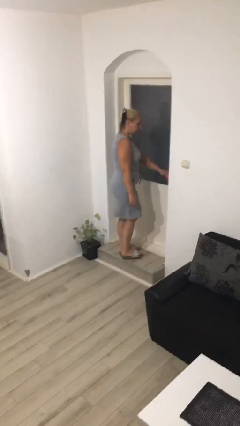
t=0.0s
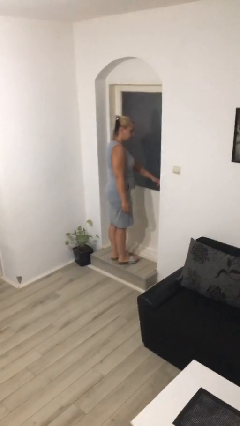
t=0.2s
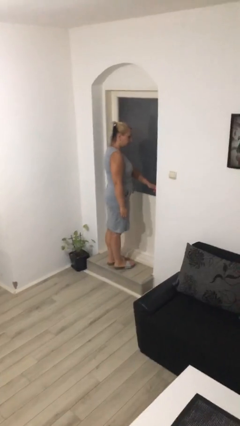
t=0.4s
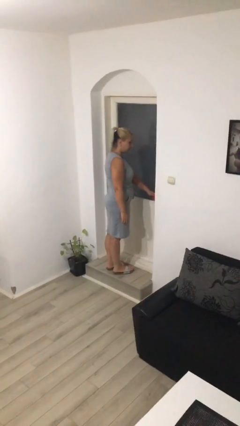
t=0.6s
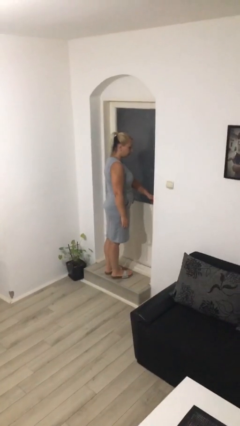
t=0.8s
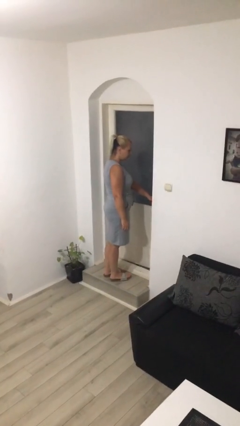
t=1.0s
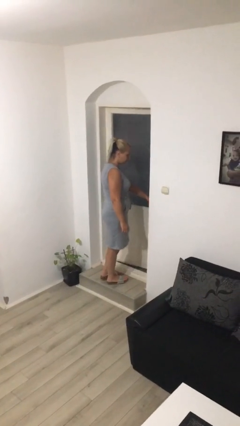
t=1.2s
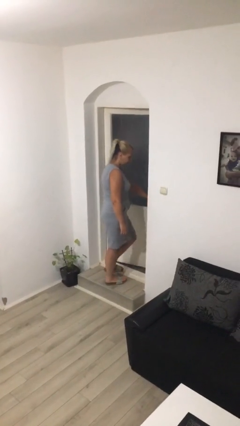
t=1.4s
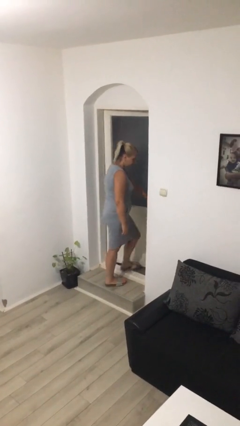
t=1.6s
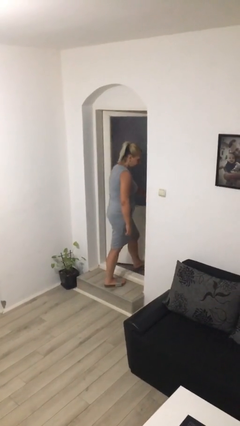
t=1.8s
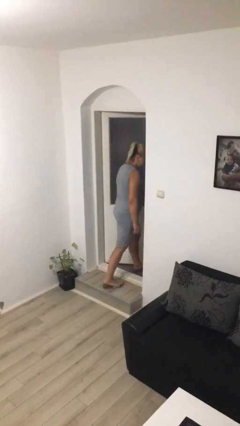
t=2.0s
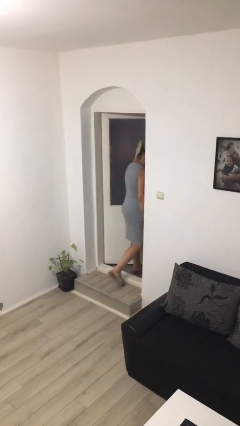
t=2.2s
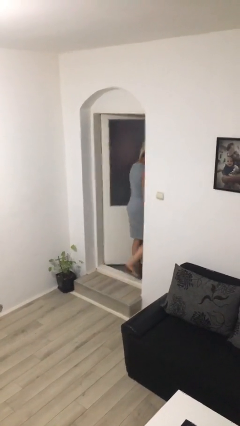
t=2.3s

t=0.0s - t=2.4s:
person opens facility door

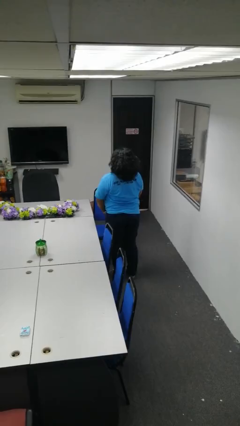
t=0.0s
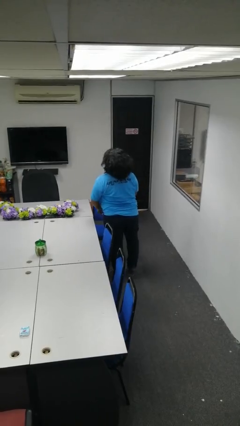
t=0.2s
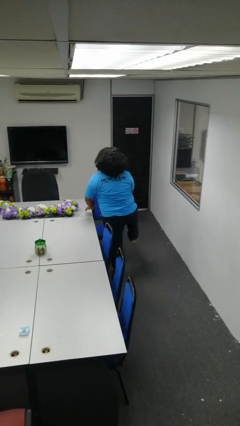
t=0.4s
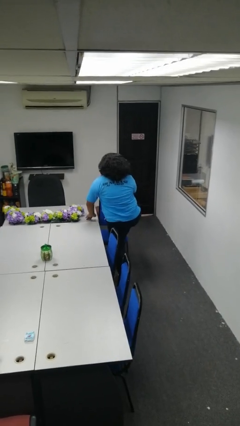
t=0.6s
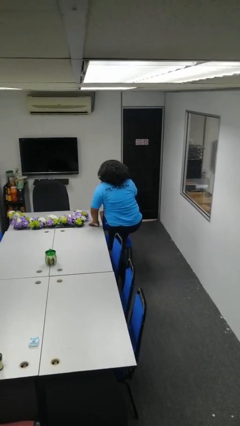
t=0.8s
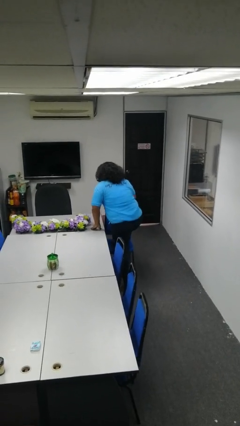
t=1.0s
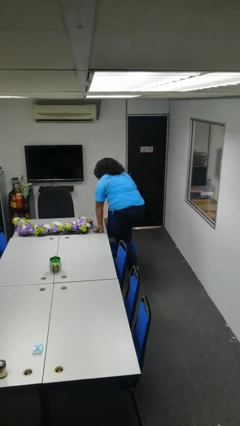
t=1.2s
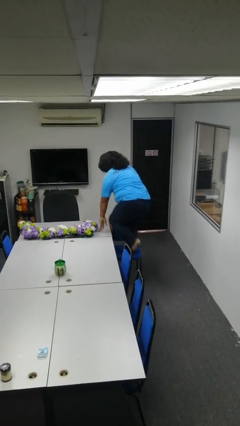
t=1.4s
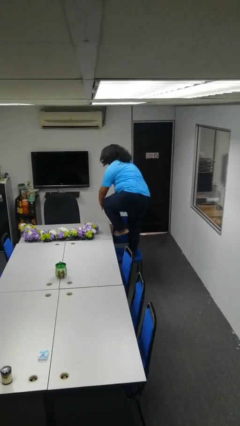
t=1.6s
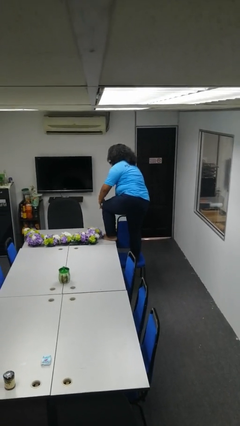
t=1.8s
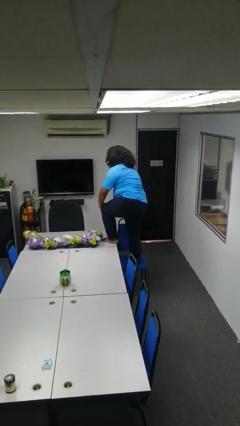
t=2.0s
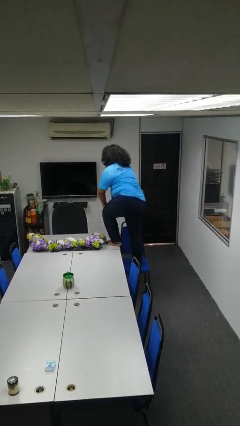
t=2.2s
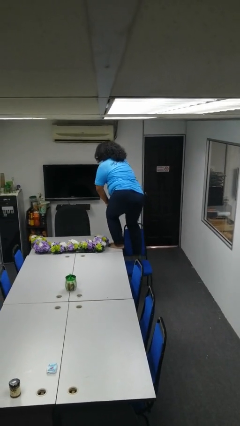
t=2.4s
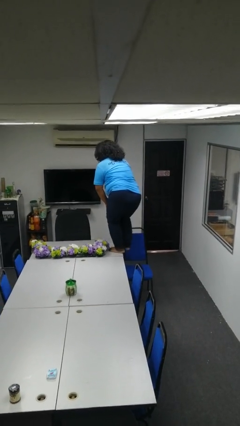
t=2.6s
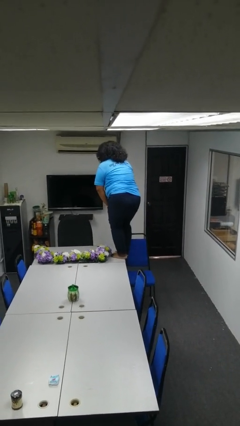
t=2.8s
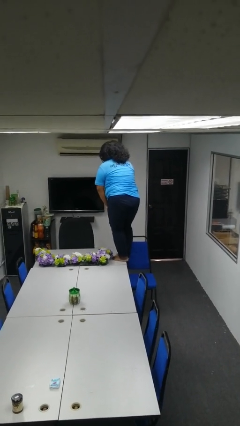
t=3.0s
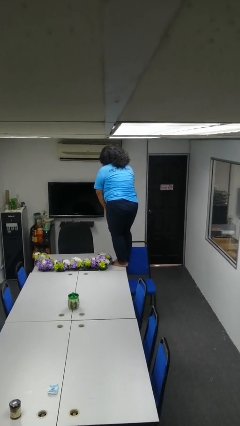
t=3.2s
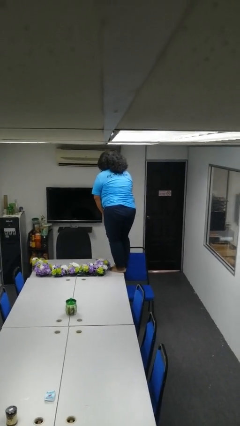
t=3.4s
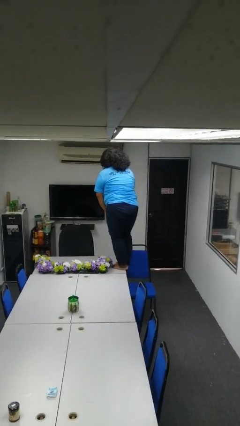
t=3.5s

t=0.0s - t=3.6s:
person climbs on table

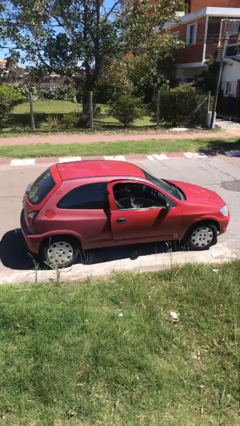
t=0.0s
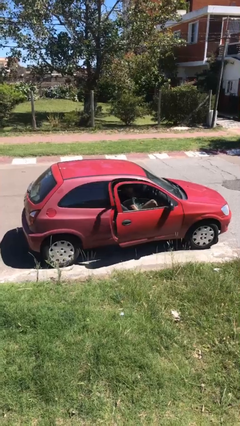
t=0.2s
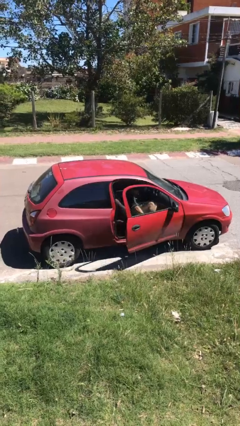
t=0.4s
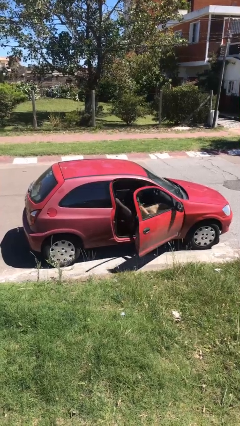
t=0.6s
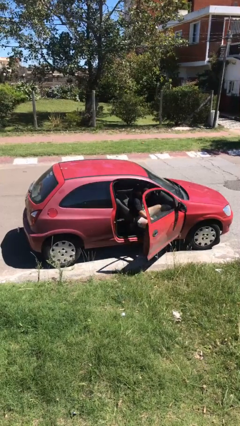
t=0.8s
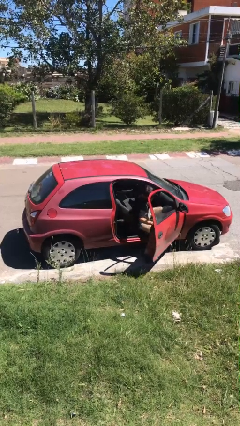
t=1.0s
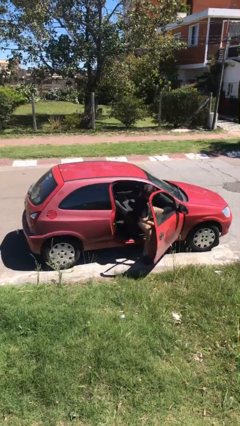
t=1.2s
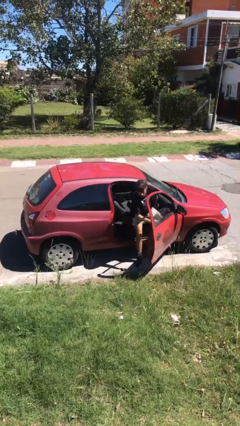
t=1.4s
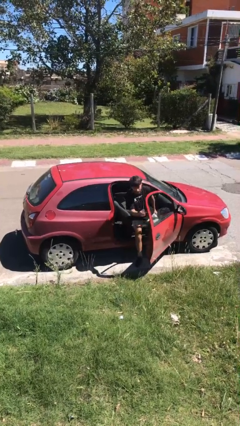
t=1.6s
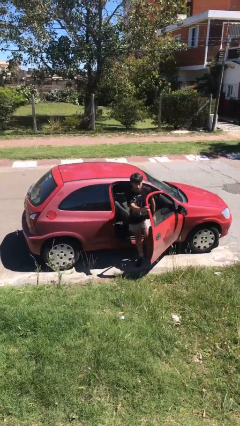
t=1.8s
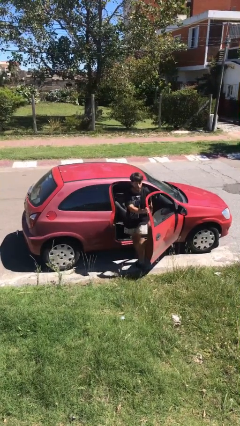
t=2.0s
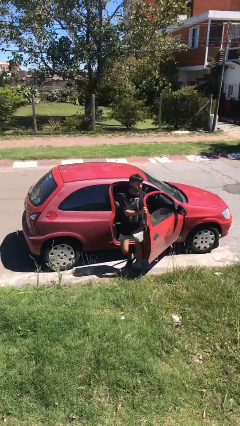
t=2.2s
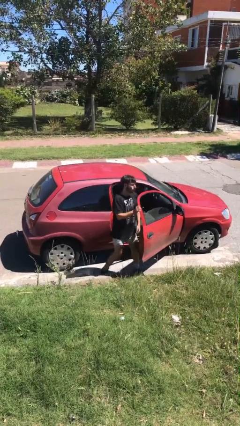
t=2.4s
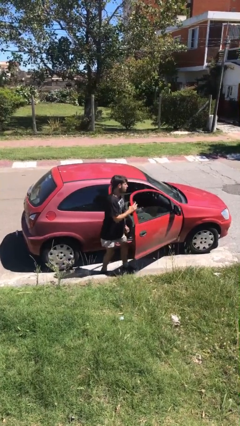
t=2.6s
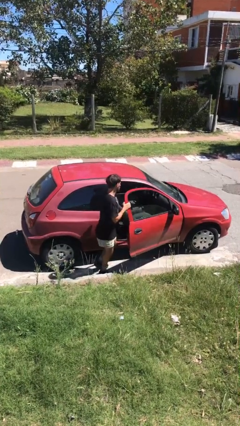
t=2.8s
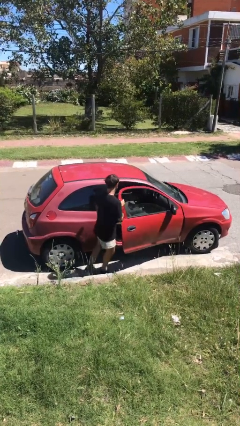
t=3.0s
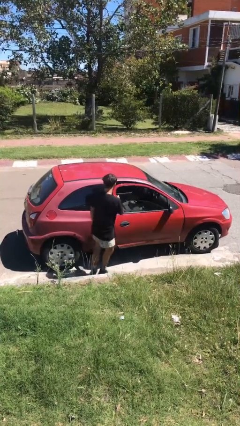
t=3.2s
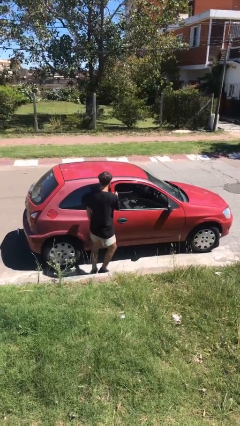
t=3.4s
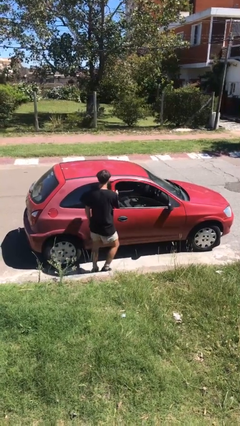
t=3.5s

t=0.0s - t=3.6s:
car drops off person

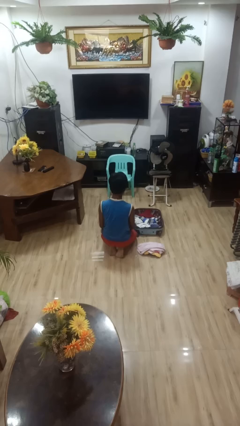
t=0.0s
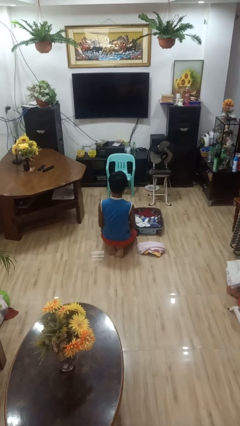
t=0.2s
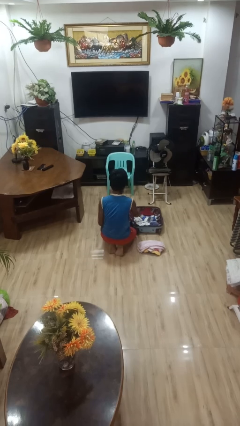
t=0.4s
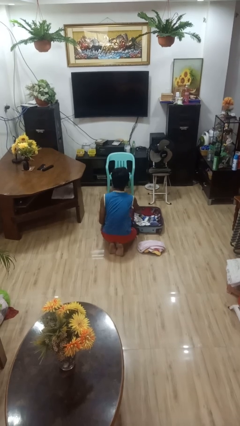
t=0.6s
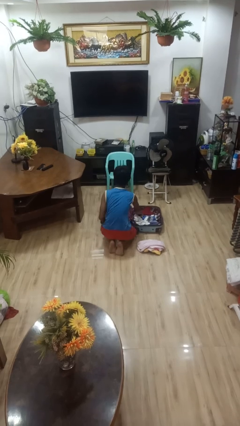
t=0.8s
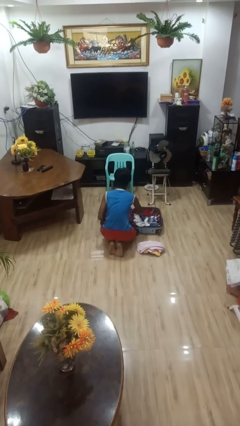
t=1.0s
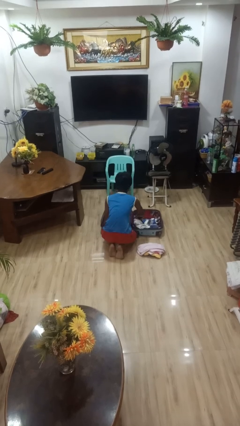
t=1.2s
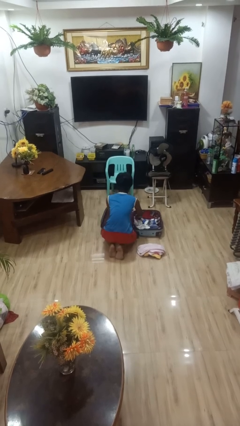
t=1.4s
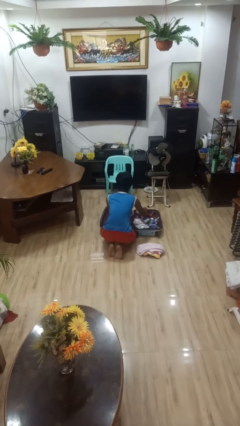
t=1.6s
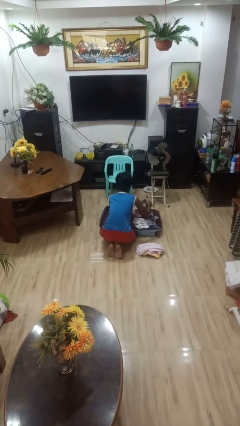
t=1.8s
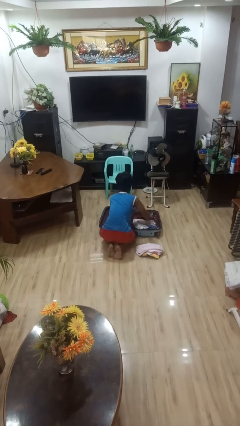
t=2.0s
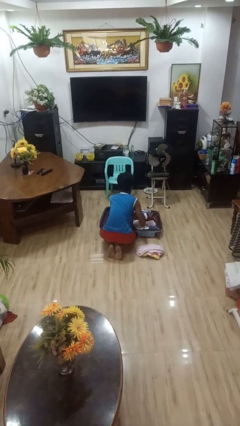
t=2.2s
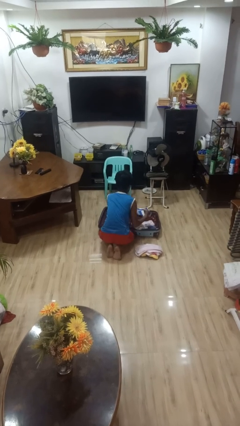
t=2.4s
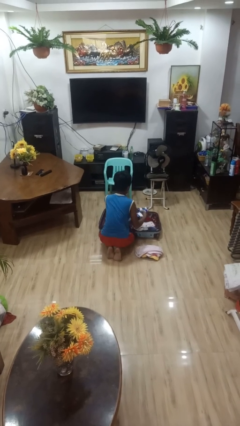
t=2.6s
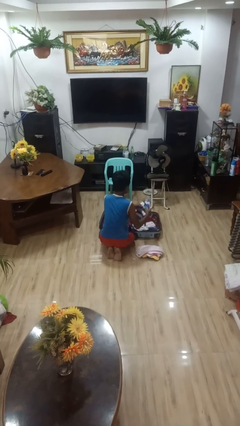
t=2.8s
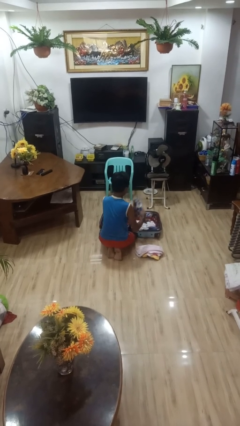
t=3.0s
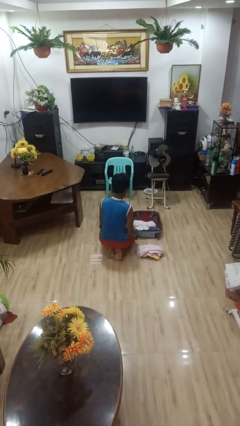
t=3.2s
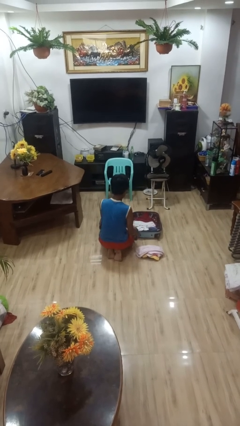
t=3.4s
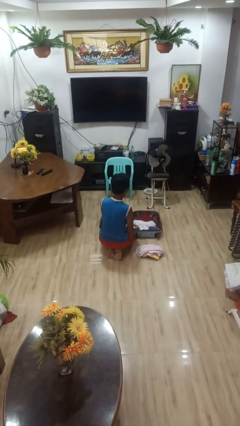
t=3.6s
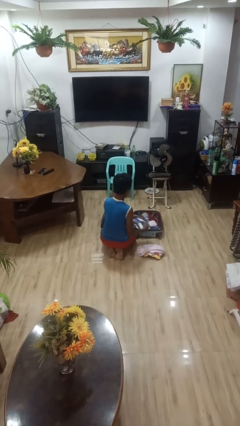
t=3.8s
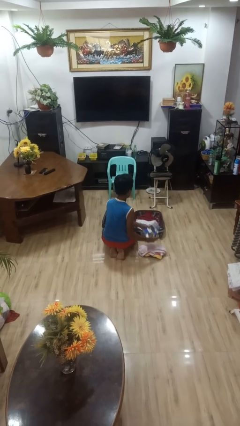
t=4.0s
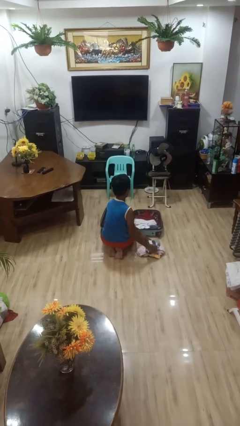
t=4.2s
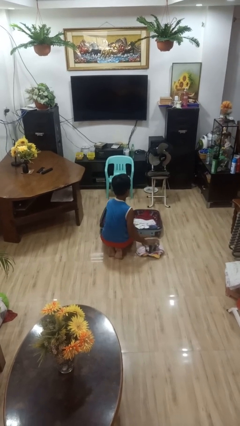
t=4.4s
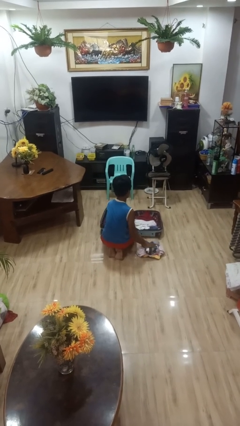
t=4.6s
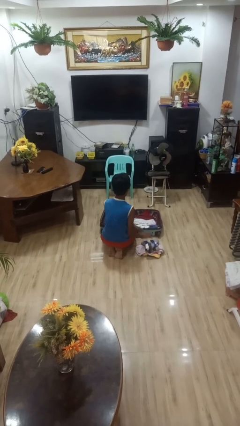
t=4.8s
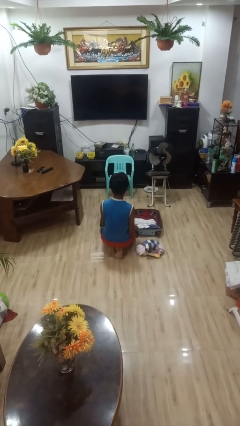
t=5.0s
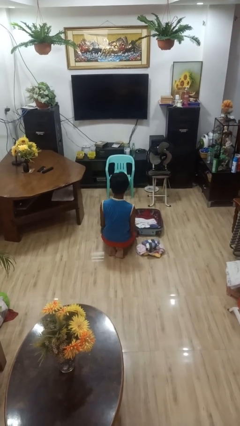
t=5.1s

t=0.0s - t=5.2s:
person unloads clothes from suitcase

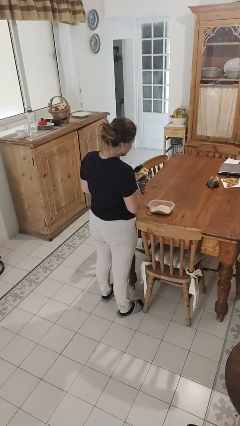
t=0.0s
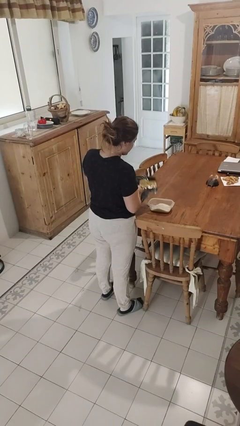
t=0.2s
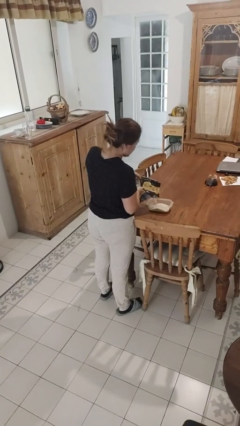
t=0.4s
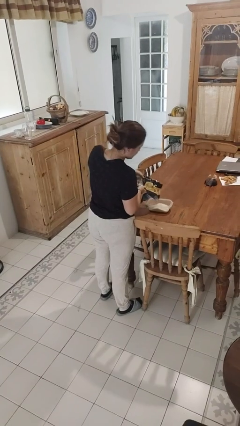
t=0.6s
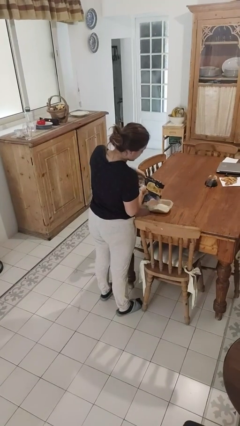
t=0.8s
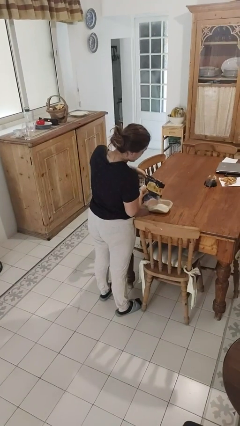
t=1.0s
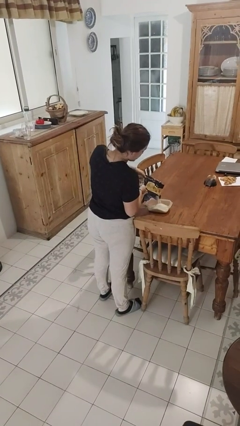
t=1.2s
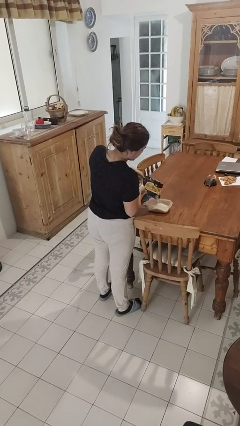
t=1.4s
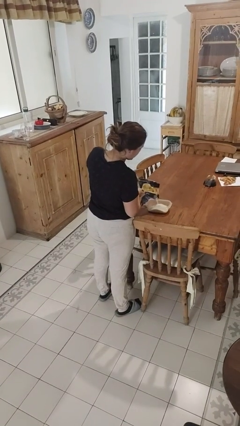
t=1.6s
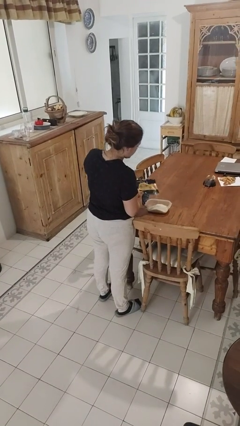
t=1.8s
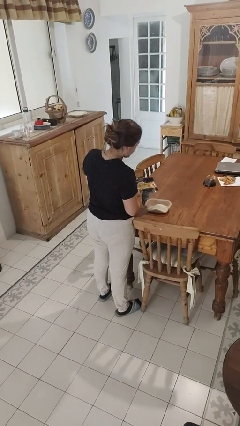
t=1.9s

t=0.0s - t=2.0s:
person pours into bowl

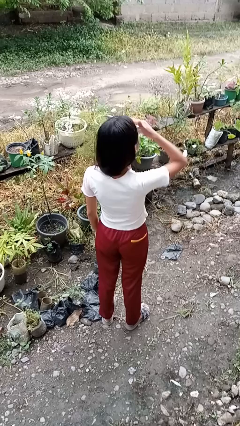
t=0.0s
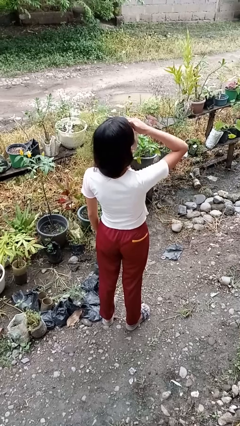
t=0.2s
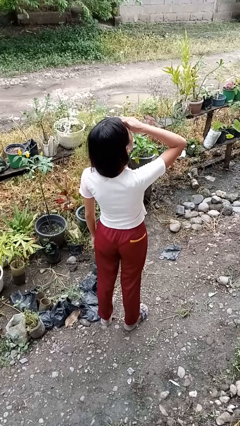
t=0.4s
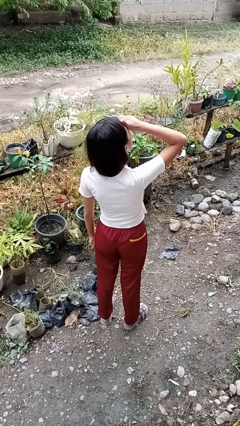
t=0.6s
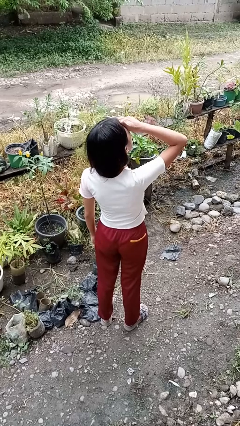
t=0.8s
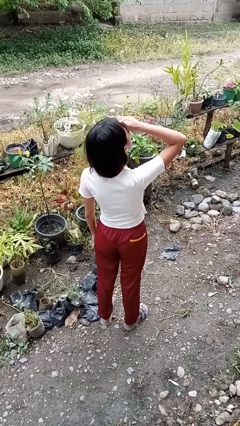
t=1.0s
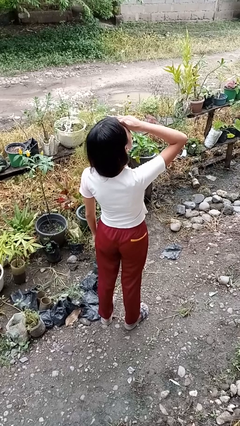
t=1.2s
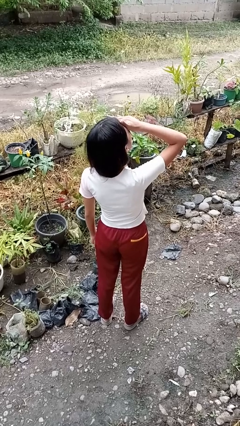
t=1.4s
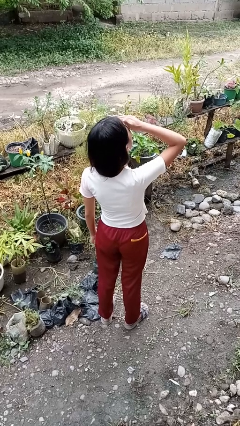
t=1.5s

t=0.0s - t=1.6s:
person shades eyes
